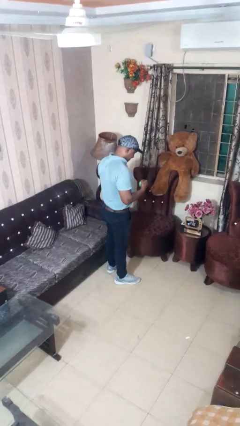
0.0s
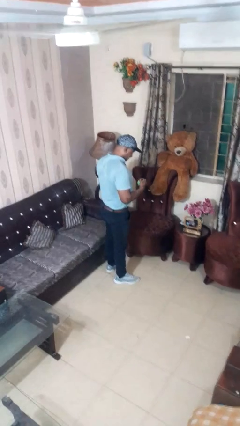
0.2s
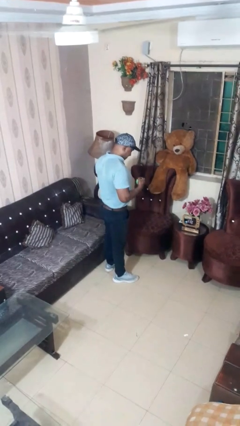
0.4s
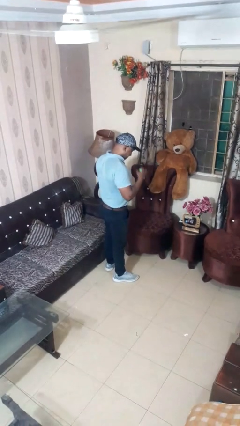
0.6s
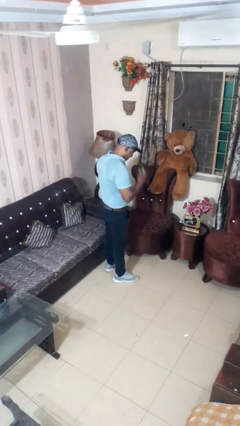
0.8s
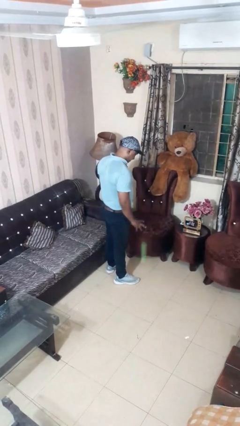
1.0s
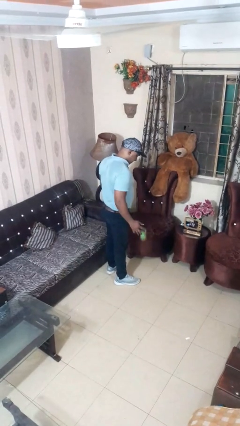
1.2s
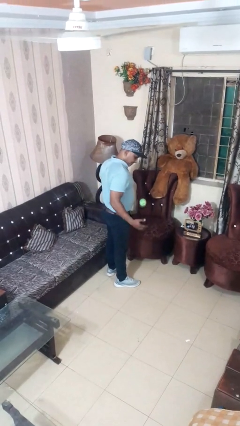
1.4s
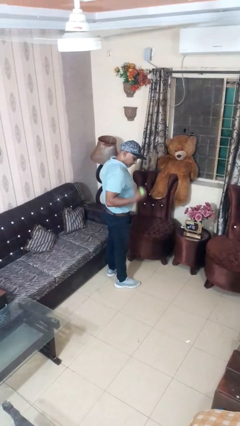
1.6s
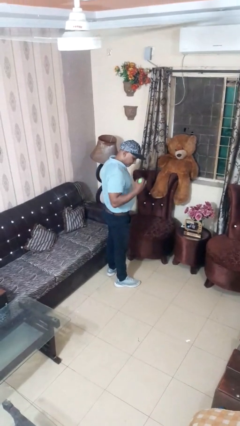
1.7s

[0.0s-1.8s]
person bounces ball on floor

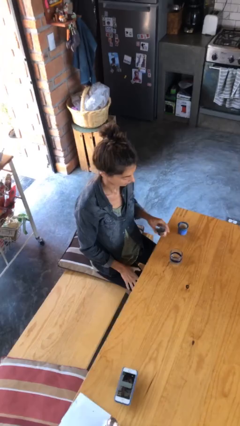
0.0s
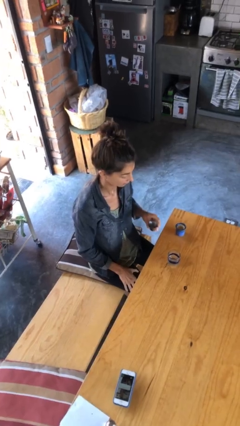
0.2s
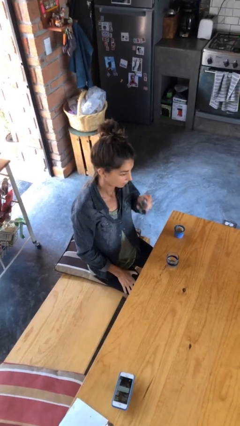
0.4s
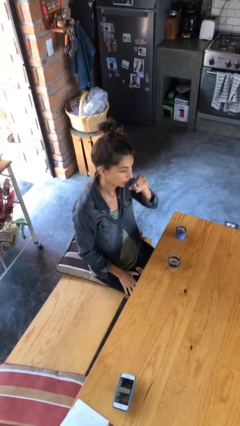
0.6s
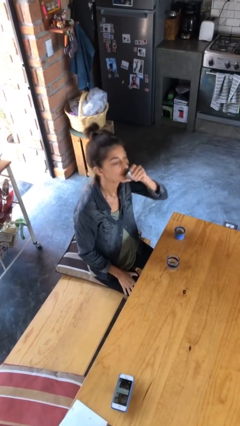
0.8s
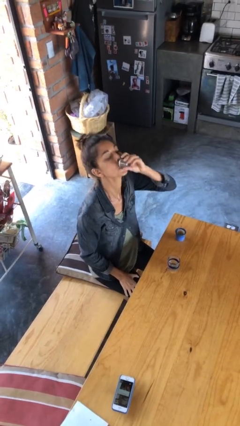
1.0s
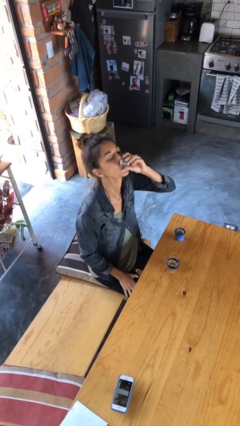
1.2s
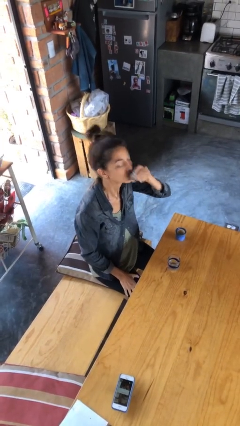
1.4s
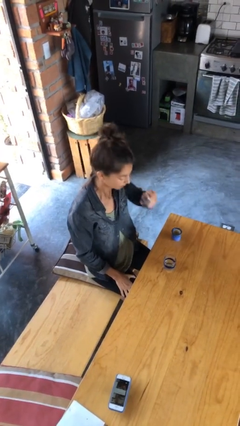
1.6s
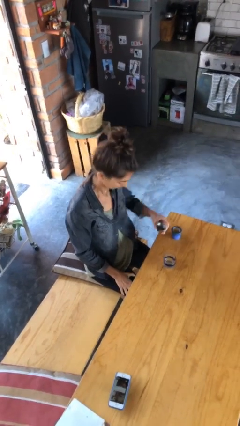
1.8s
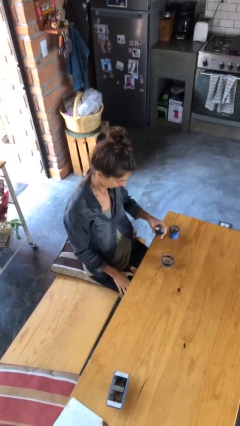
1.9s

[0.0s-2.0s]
person drinks from shotglass

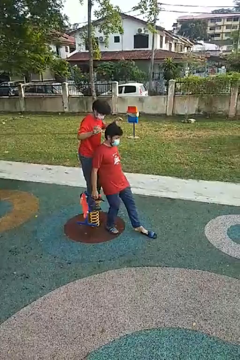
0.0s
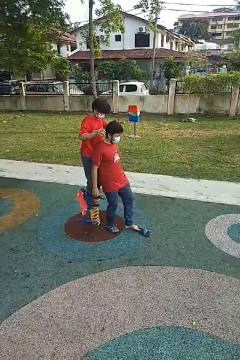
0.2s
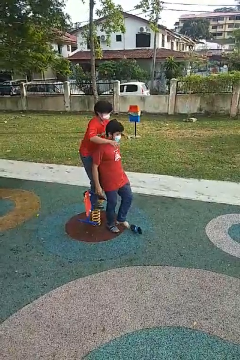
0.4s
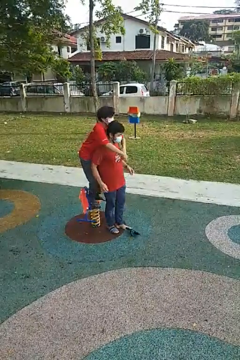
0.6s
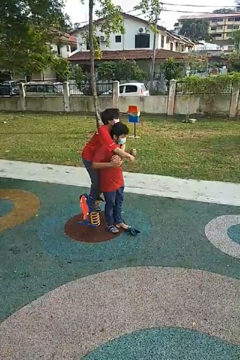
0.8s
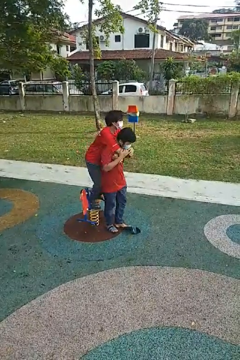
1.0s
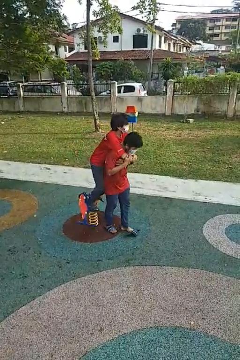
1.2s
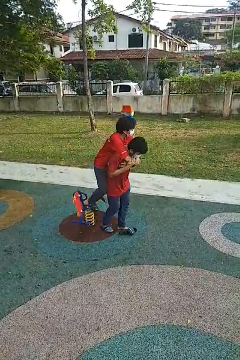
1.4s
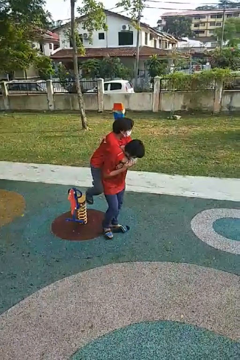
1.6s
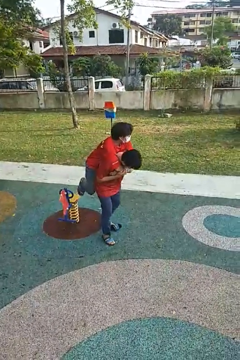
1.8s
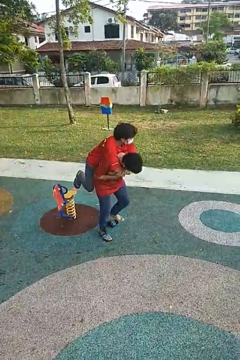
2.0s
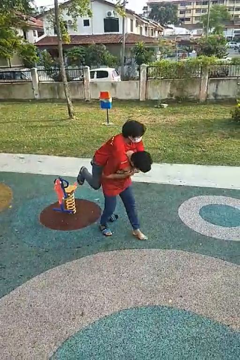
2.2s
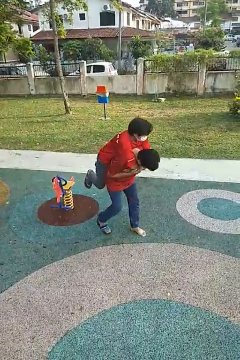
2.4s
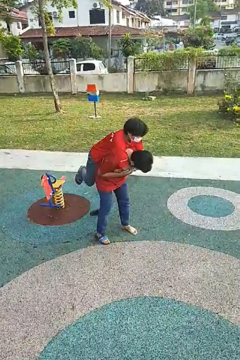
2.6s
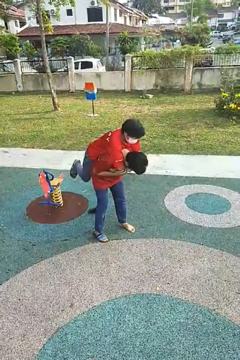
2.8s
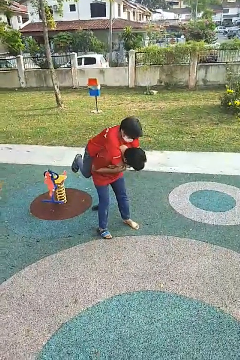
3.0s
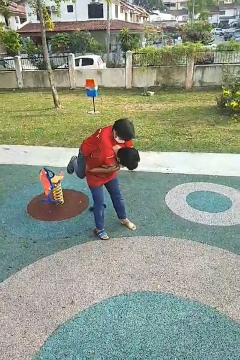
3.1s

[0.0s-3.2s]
person carries person over shoulder

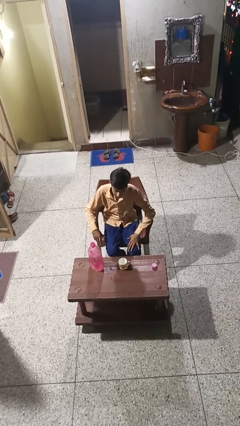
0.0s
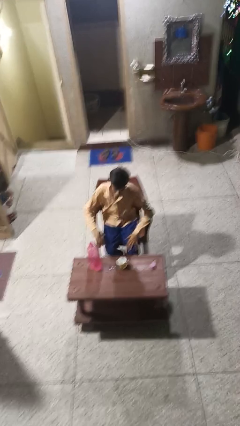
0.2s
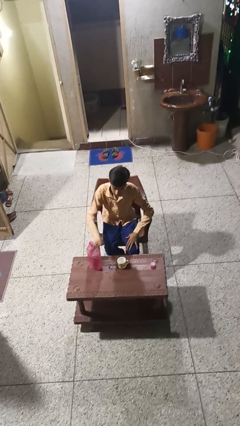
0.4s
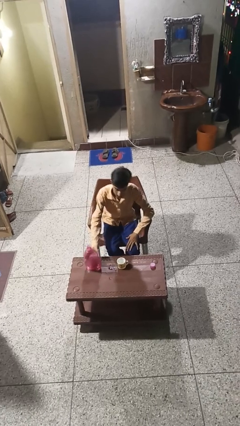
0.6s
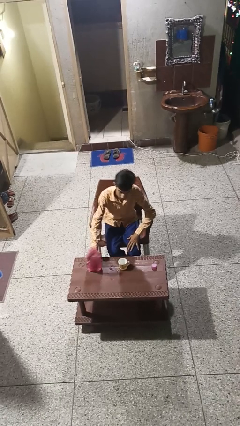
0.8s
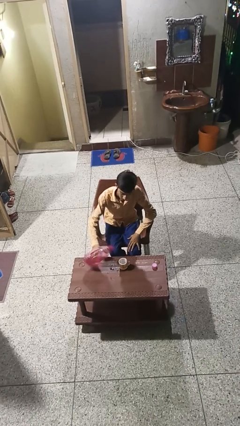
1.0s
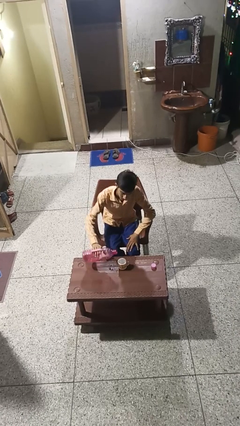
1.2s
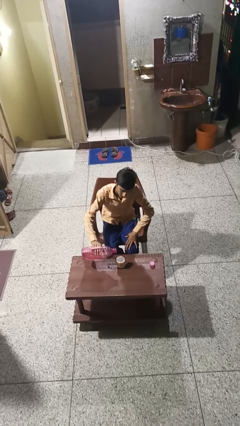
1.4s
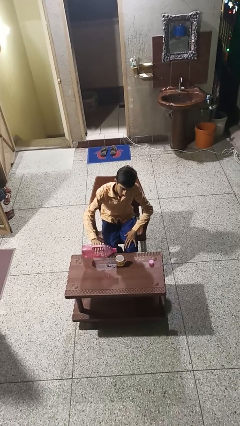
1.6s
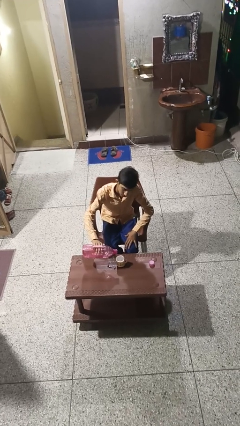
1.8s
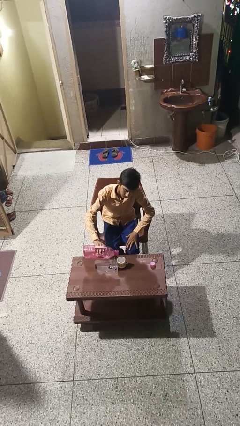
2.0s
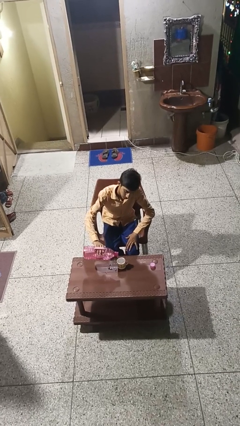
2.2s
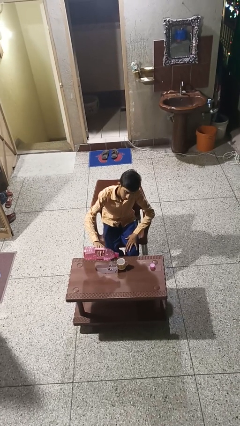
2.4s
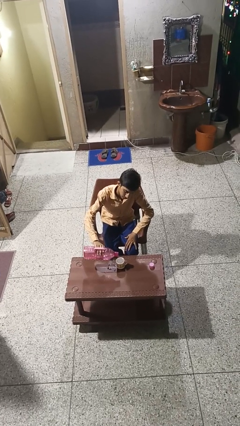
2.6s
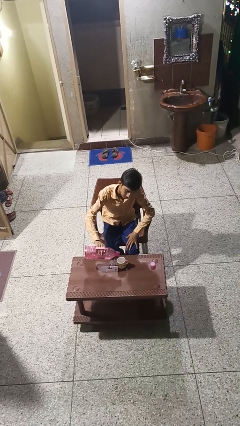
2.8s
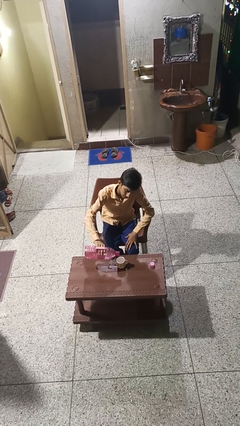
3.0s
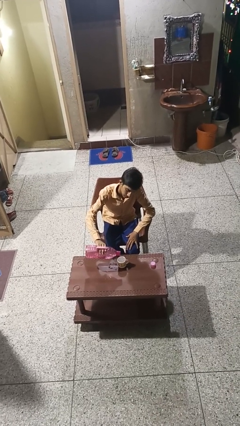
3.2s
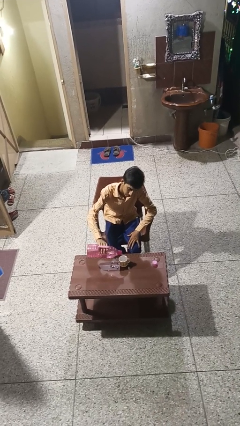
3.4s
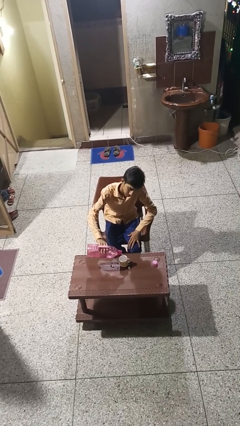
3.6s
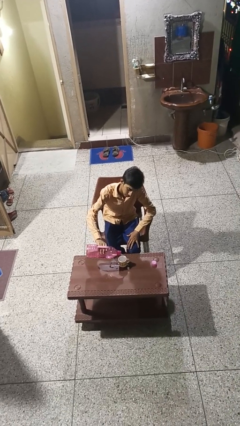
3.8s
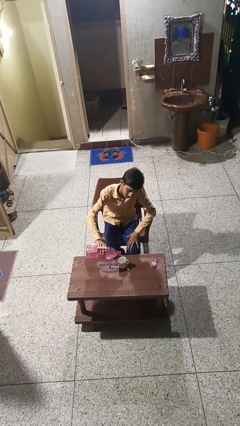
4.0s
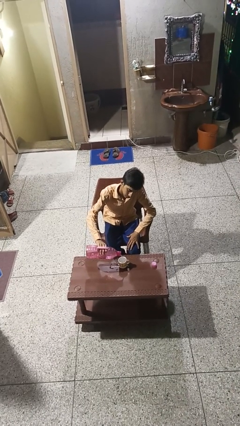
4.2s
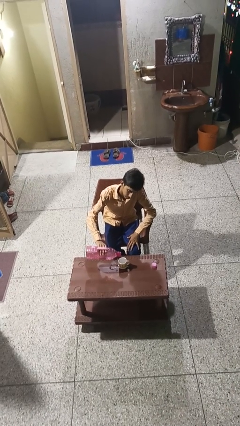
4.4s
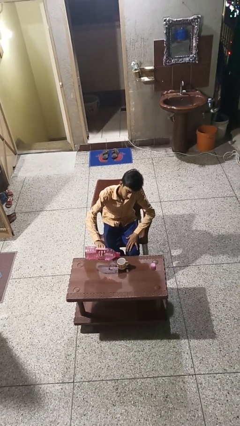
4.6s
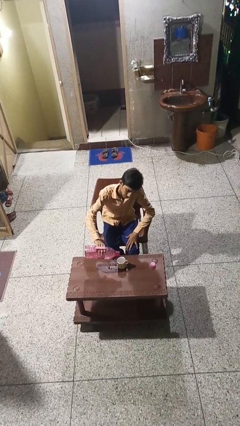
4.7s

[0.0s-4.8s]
person pours liquid into cup

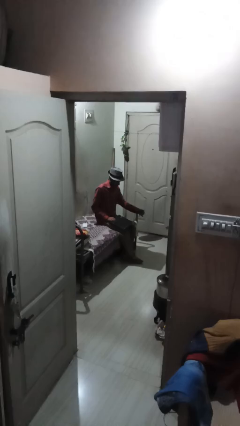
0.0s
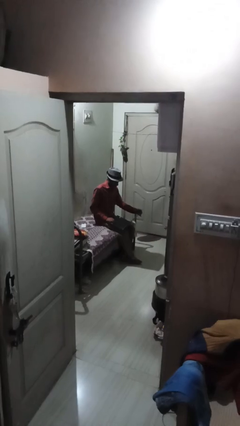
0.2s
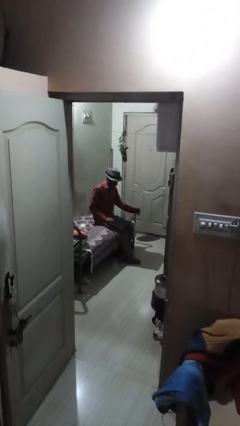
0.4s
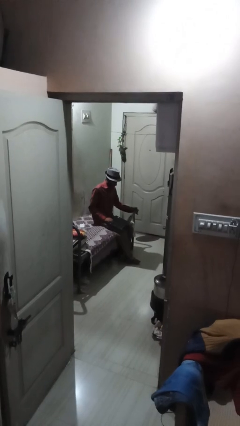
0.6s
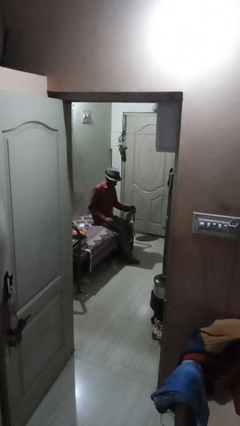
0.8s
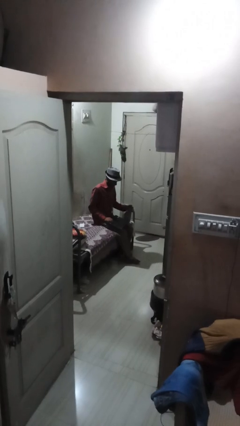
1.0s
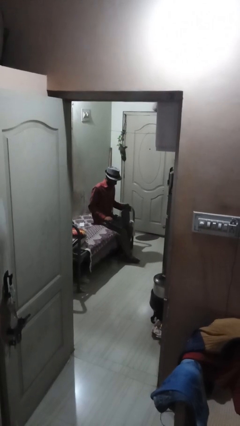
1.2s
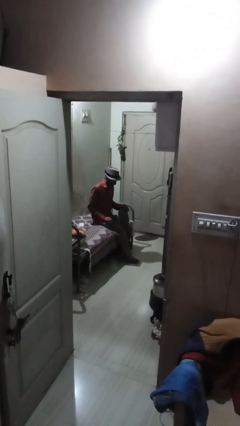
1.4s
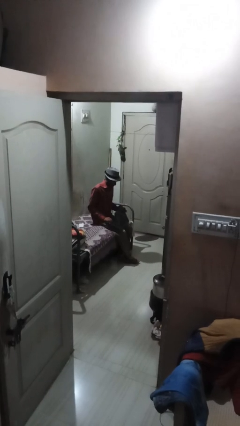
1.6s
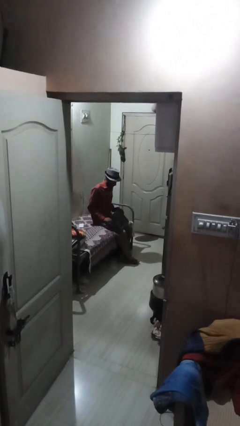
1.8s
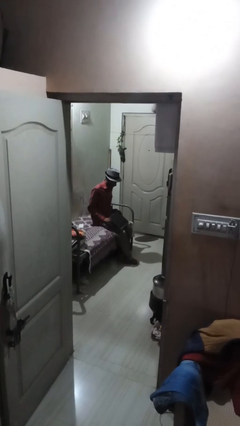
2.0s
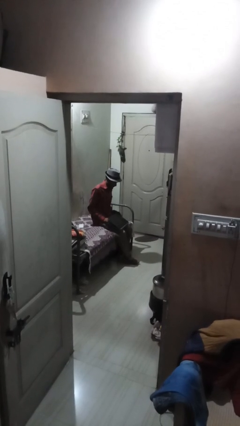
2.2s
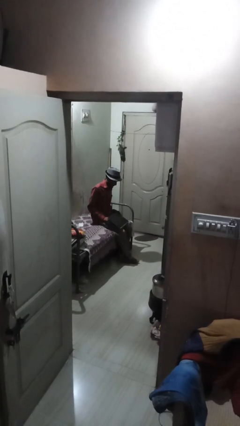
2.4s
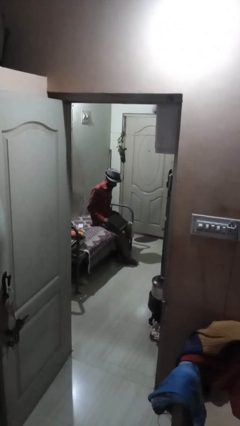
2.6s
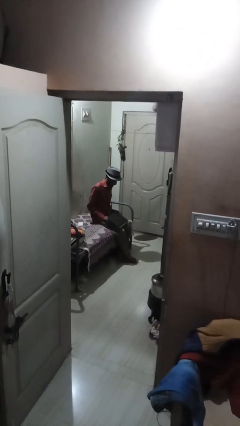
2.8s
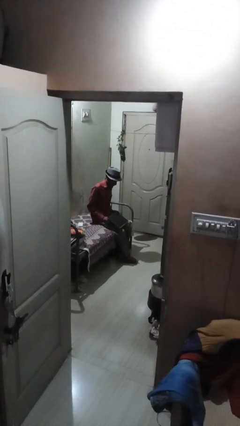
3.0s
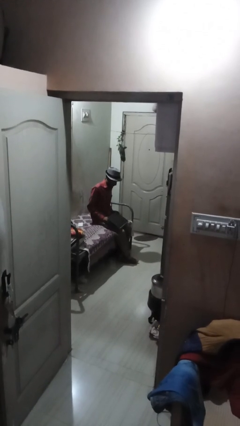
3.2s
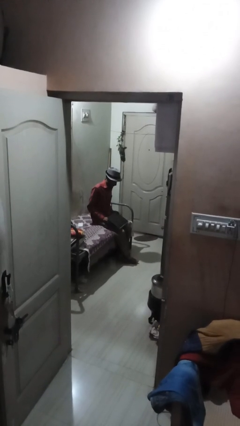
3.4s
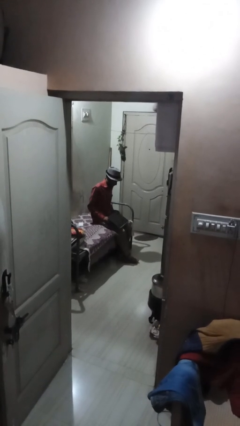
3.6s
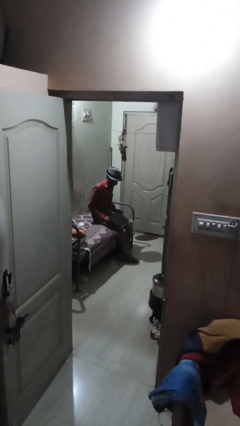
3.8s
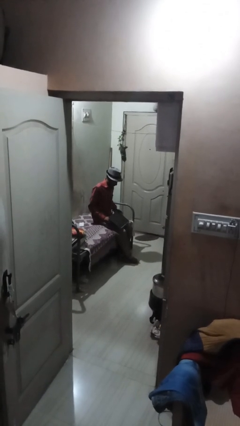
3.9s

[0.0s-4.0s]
person closes laptop

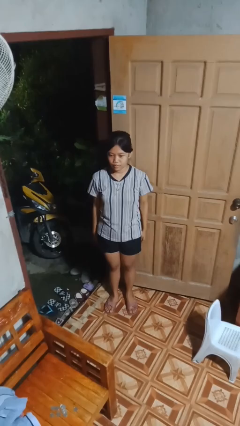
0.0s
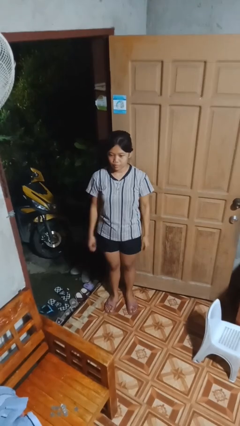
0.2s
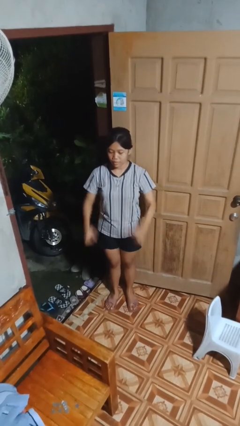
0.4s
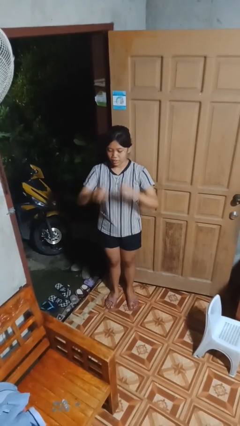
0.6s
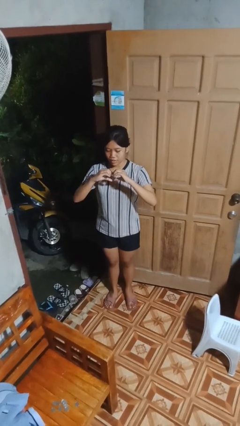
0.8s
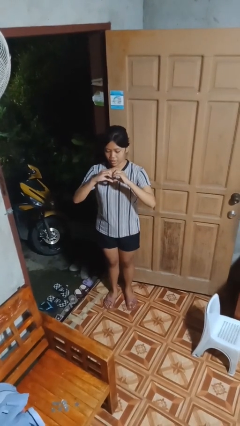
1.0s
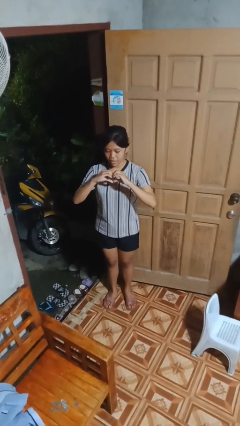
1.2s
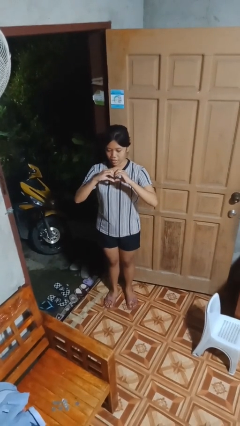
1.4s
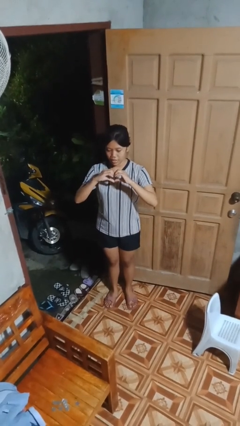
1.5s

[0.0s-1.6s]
person gestures heart

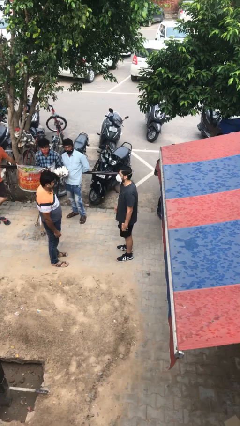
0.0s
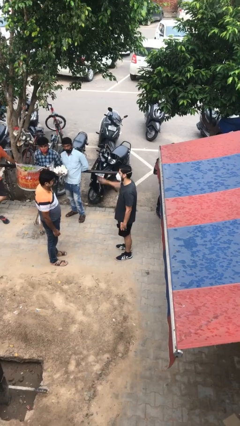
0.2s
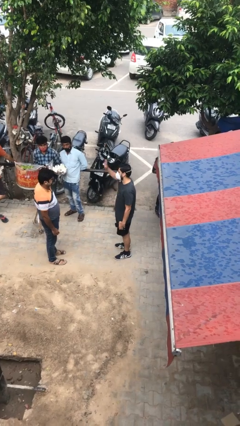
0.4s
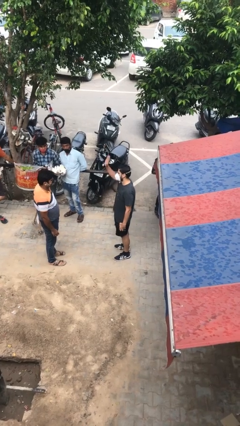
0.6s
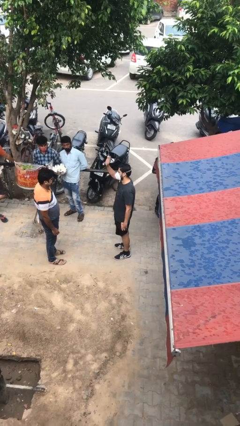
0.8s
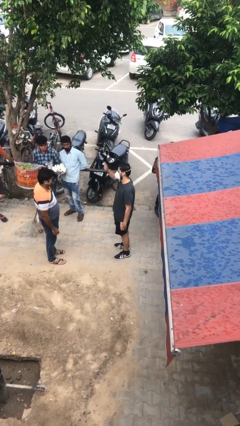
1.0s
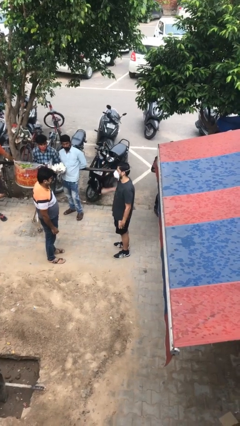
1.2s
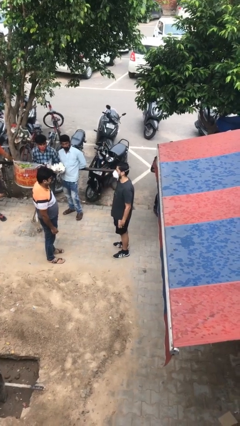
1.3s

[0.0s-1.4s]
person waves at person
